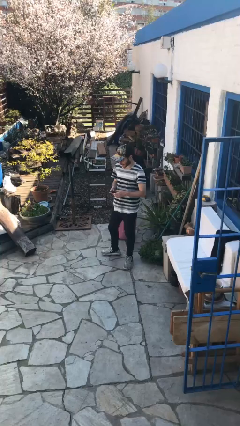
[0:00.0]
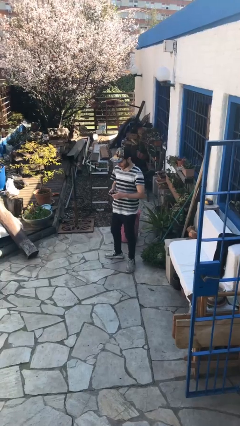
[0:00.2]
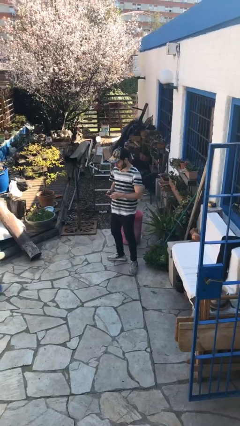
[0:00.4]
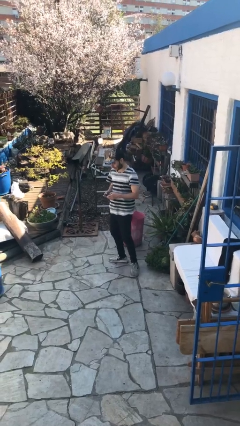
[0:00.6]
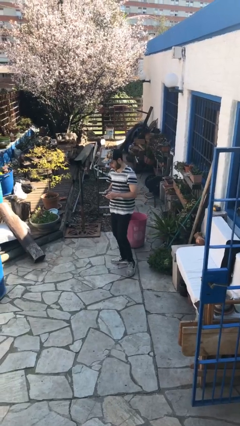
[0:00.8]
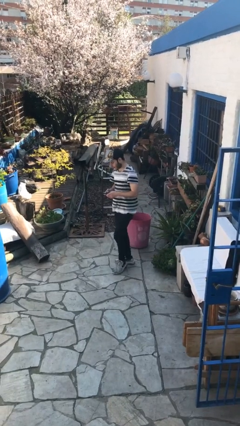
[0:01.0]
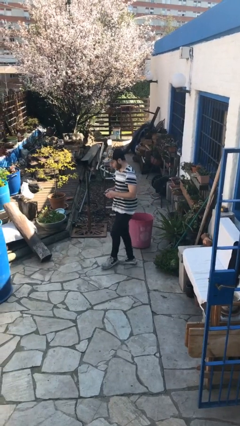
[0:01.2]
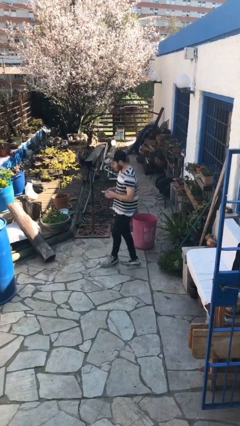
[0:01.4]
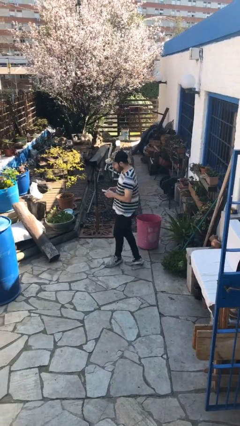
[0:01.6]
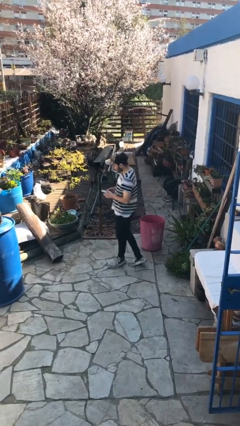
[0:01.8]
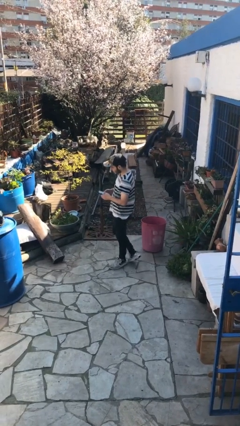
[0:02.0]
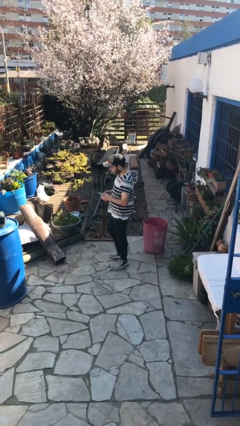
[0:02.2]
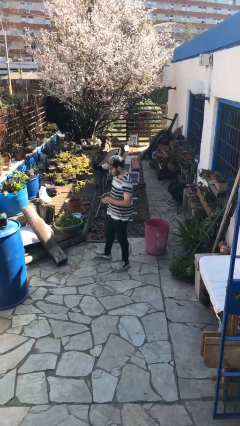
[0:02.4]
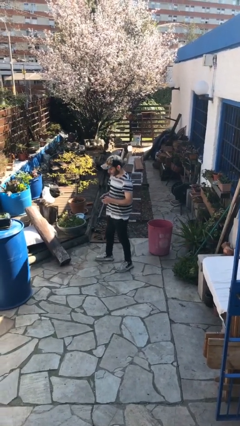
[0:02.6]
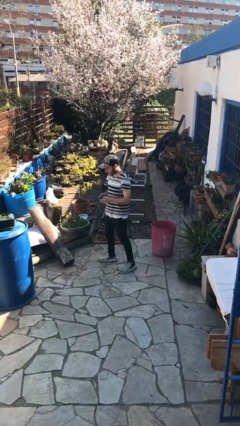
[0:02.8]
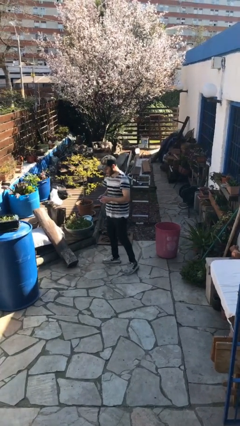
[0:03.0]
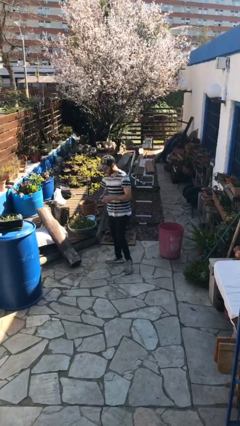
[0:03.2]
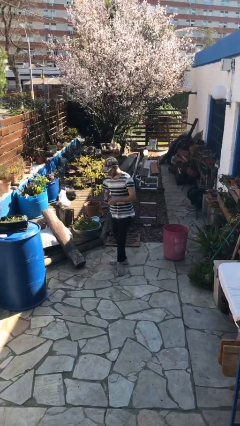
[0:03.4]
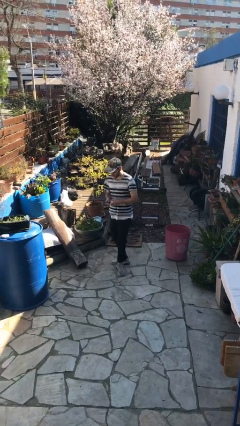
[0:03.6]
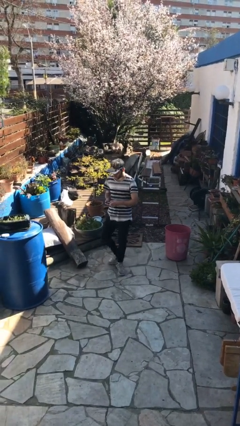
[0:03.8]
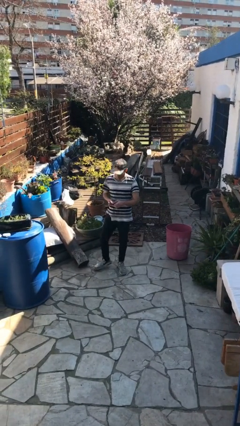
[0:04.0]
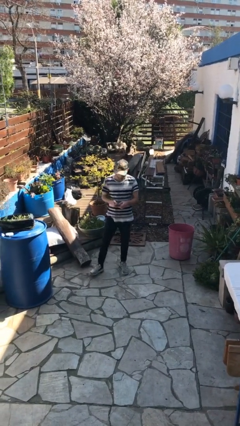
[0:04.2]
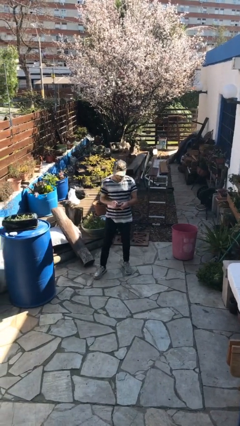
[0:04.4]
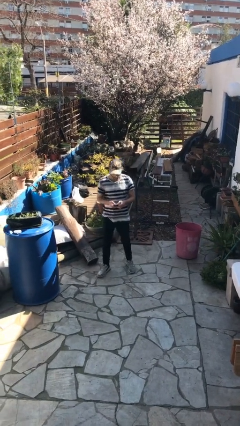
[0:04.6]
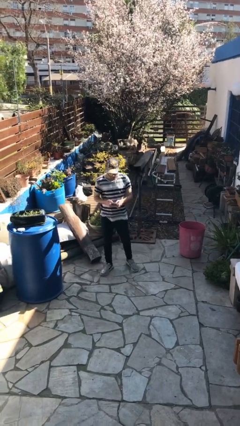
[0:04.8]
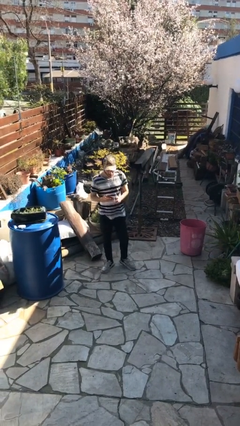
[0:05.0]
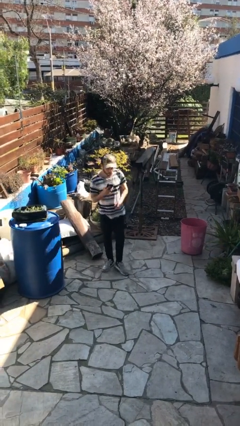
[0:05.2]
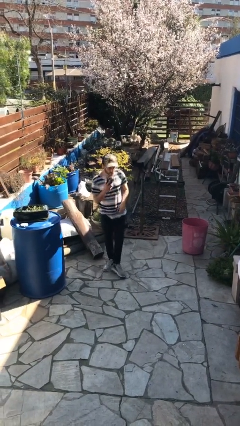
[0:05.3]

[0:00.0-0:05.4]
person texts on phone

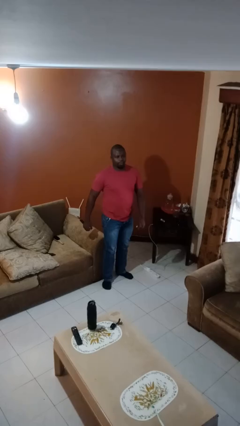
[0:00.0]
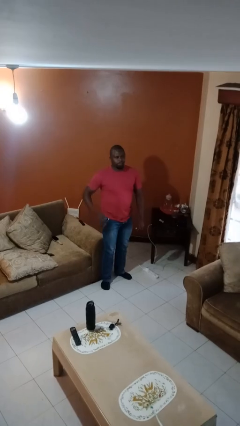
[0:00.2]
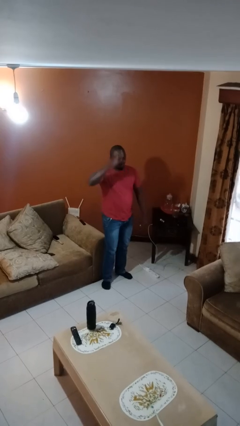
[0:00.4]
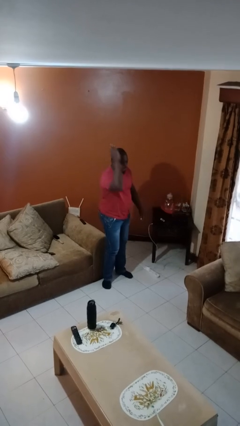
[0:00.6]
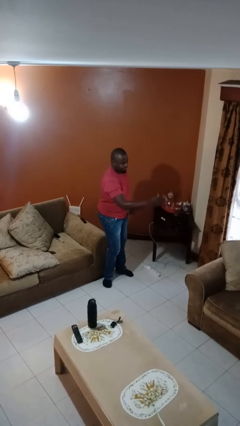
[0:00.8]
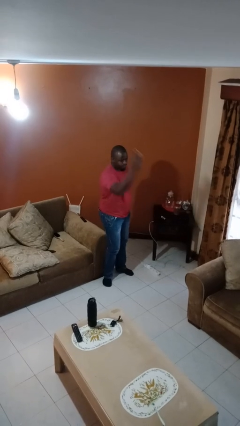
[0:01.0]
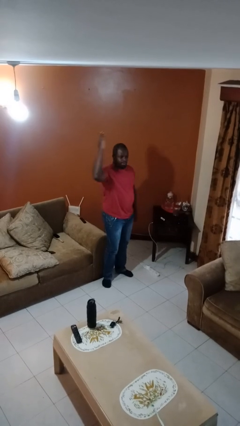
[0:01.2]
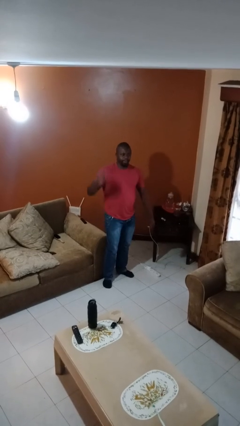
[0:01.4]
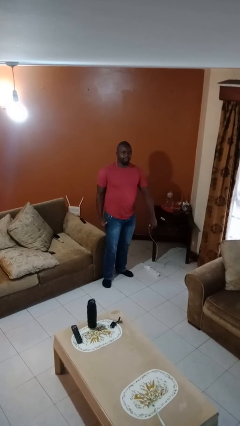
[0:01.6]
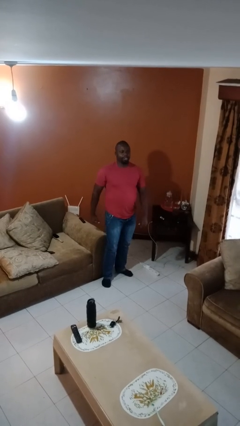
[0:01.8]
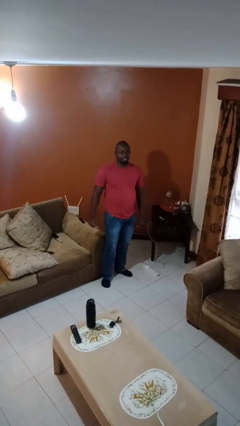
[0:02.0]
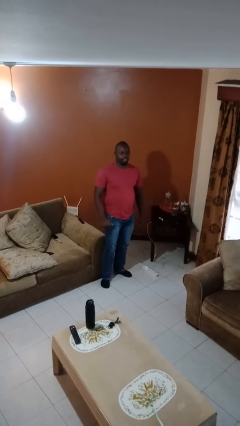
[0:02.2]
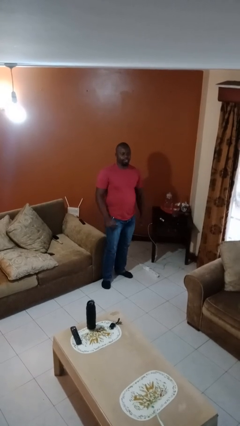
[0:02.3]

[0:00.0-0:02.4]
person karate chop

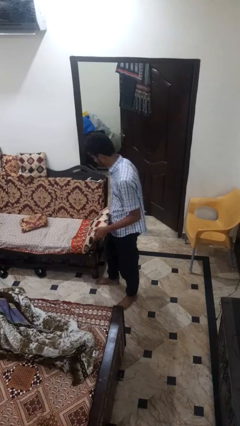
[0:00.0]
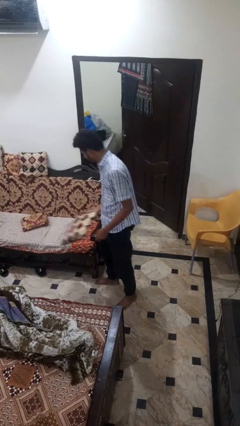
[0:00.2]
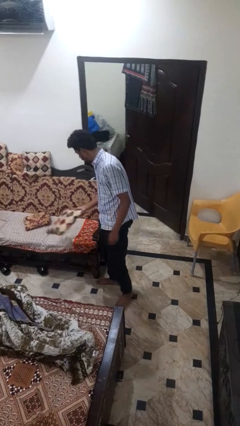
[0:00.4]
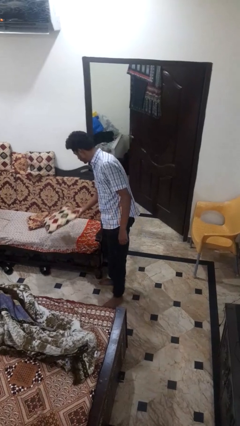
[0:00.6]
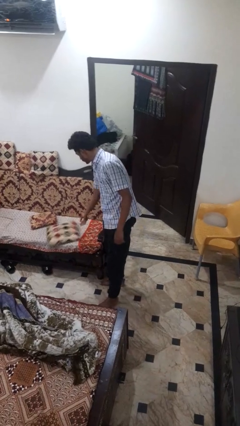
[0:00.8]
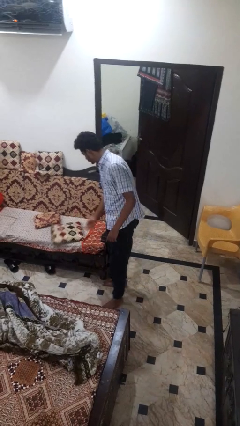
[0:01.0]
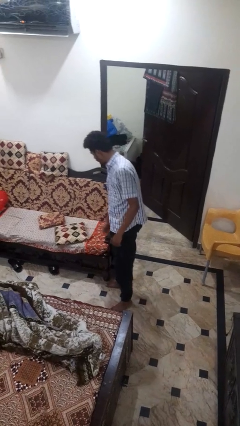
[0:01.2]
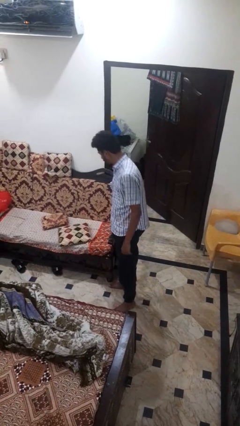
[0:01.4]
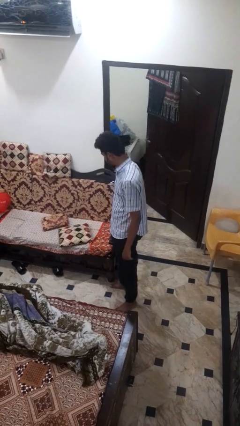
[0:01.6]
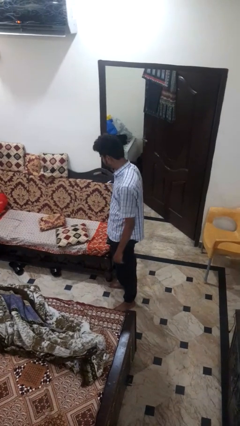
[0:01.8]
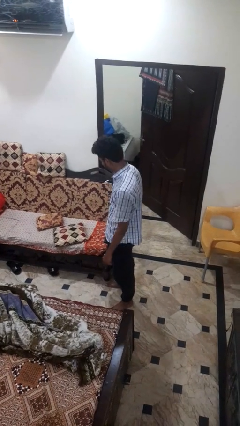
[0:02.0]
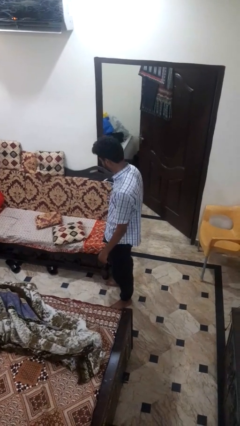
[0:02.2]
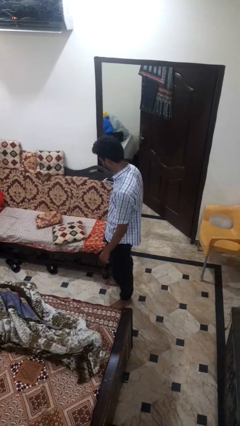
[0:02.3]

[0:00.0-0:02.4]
person puts down object on couch

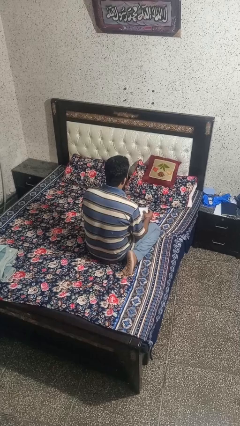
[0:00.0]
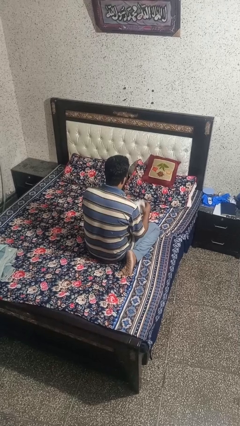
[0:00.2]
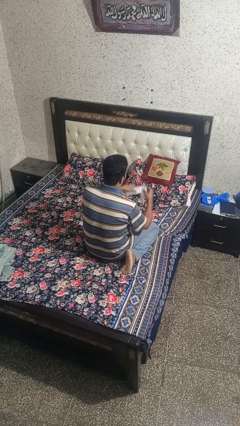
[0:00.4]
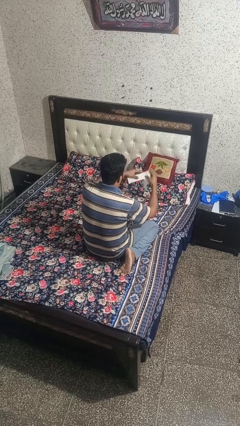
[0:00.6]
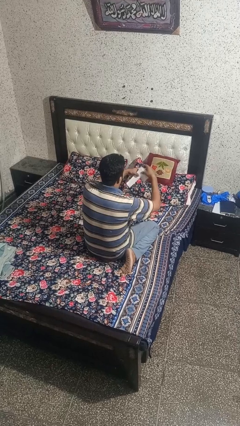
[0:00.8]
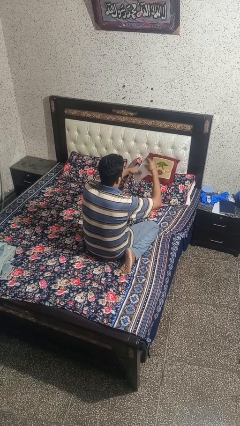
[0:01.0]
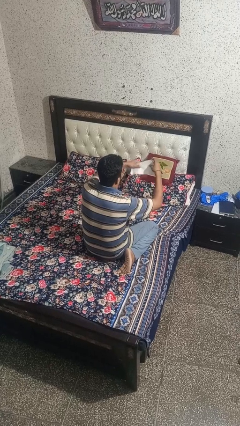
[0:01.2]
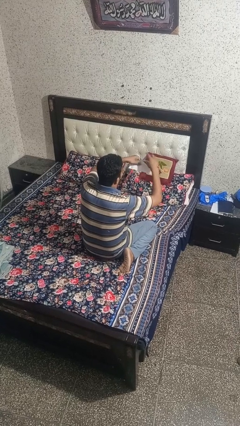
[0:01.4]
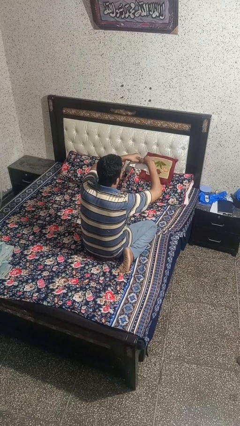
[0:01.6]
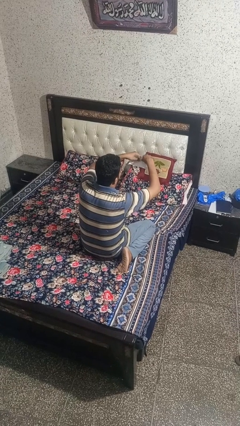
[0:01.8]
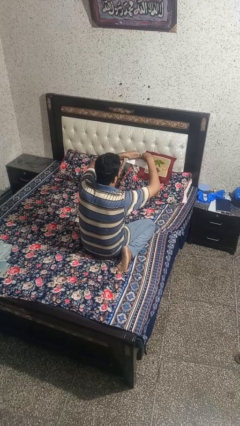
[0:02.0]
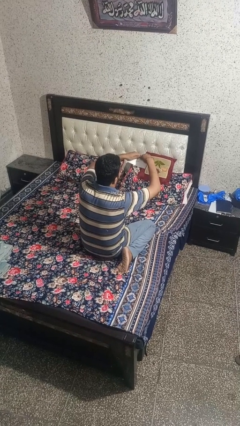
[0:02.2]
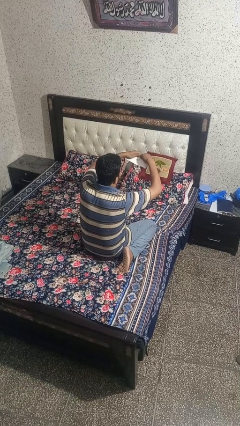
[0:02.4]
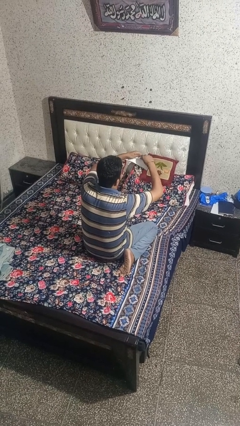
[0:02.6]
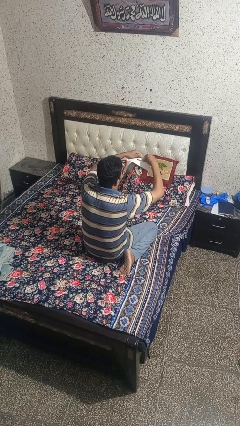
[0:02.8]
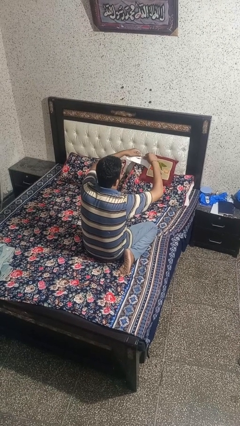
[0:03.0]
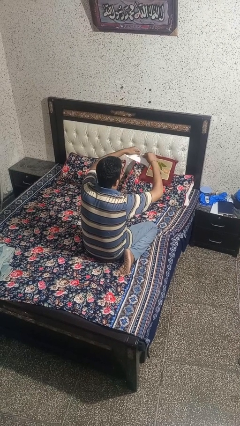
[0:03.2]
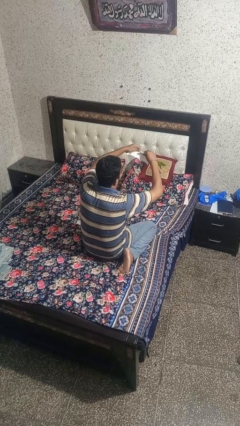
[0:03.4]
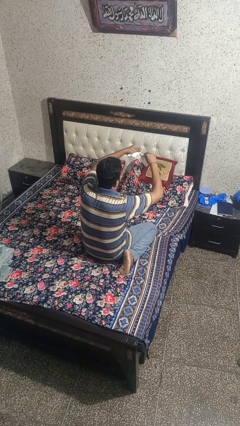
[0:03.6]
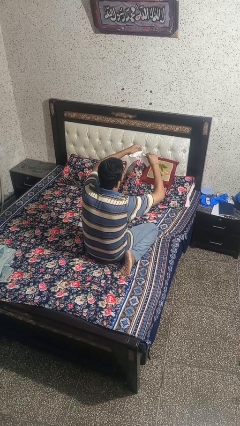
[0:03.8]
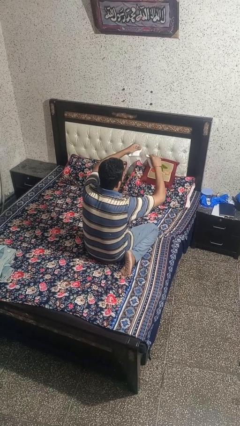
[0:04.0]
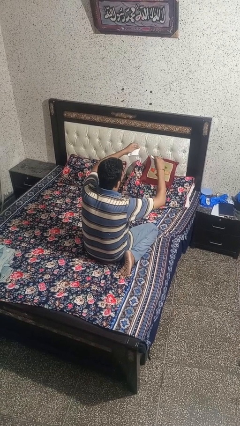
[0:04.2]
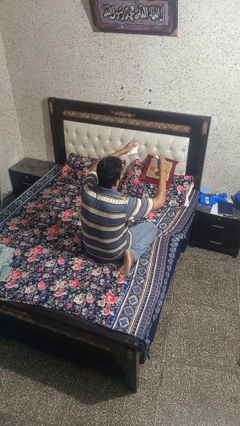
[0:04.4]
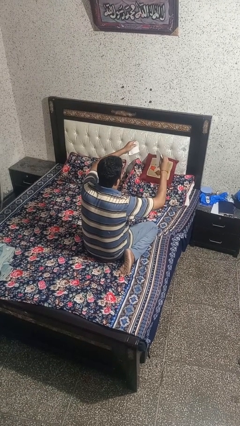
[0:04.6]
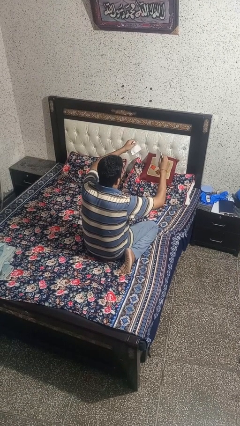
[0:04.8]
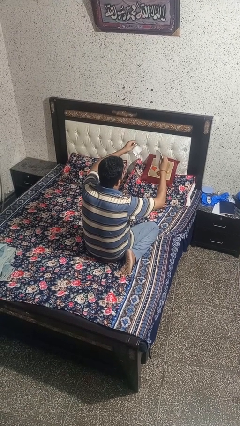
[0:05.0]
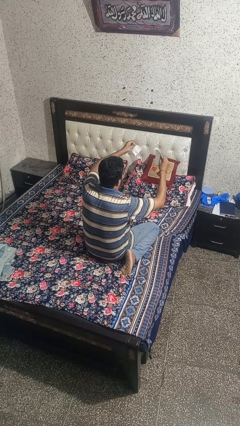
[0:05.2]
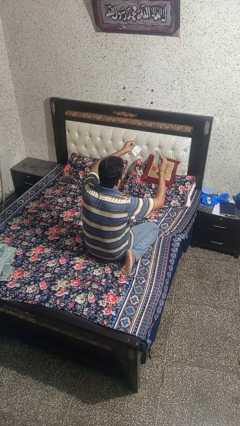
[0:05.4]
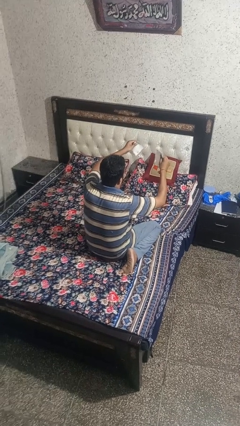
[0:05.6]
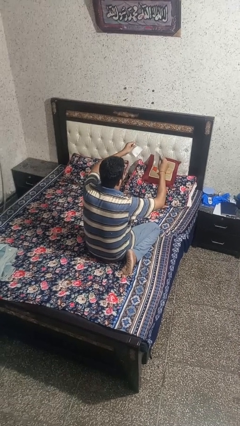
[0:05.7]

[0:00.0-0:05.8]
person tears paper

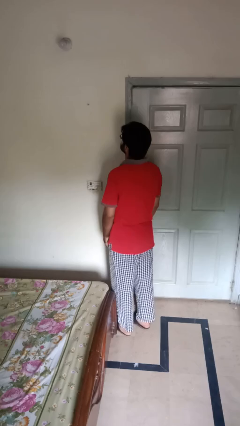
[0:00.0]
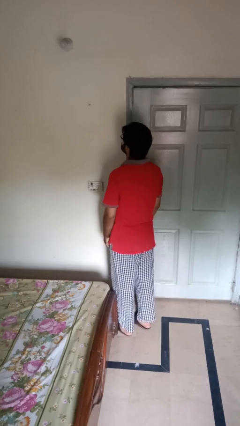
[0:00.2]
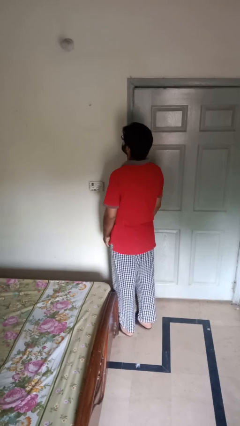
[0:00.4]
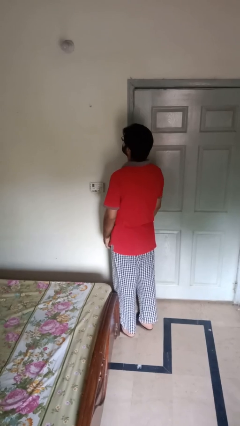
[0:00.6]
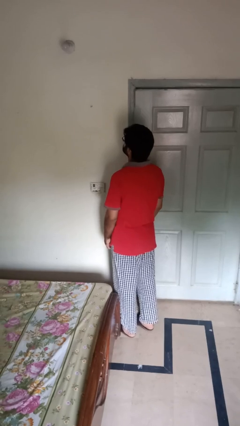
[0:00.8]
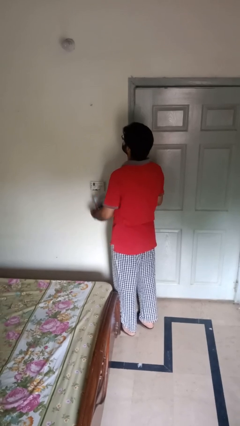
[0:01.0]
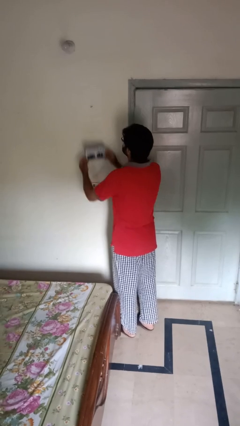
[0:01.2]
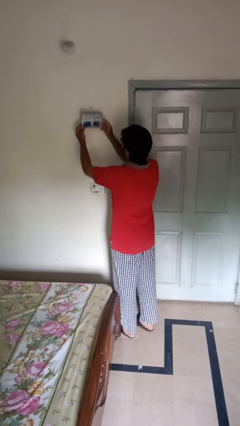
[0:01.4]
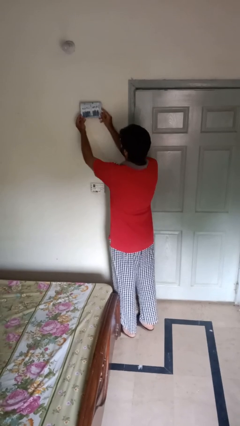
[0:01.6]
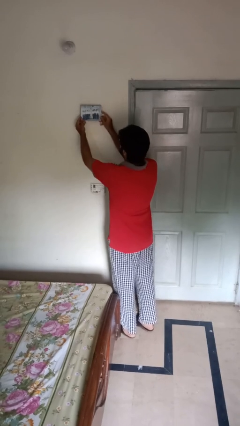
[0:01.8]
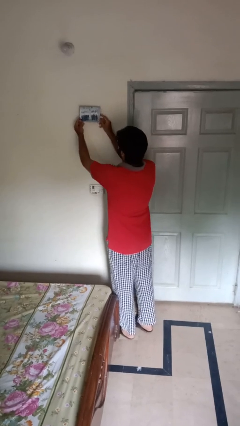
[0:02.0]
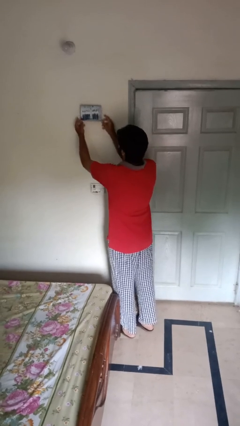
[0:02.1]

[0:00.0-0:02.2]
person puts up picture frame
